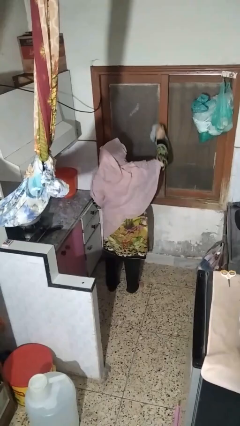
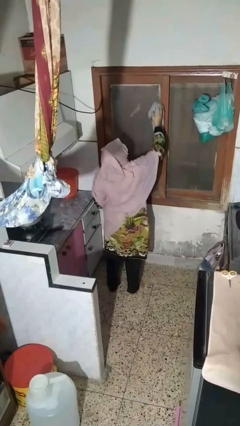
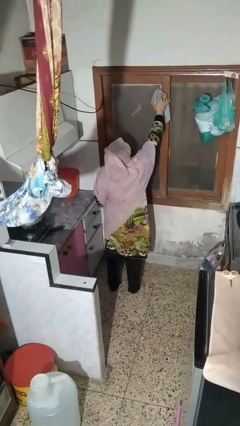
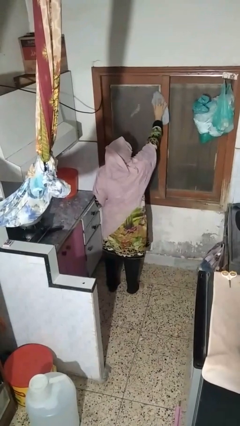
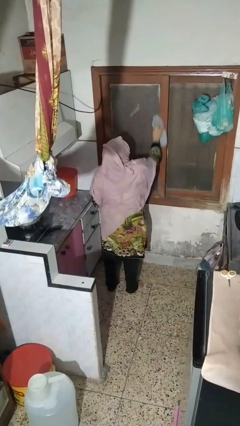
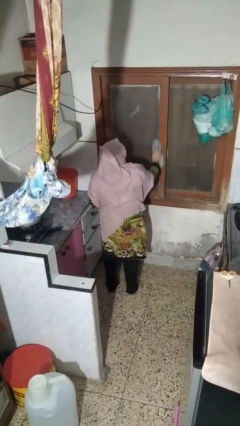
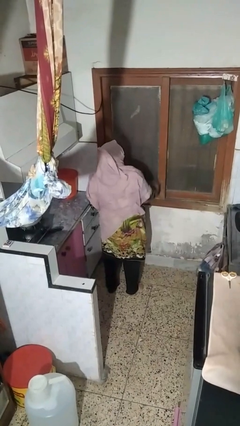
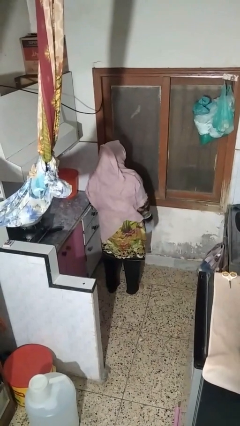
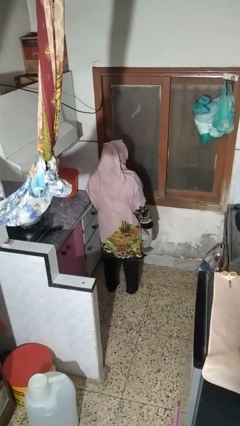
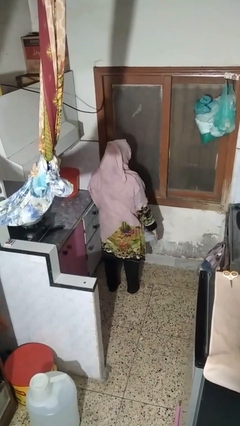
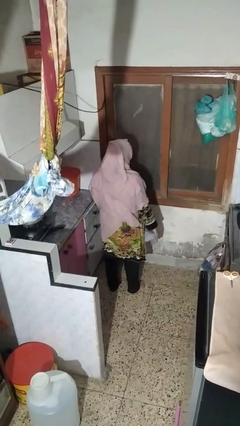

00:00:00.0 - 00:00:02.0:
person washes window

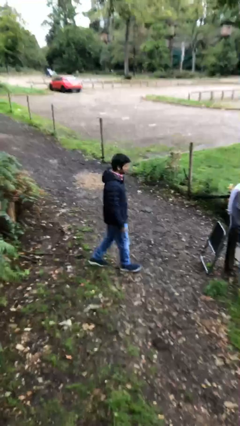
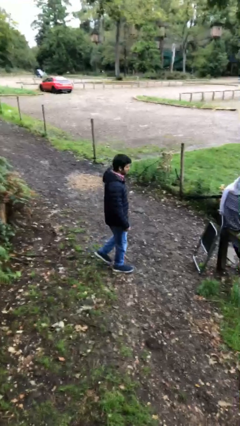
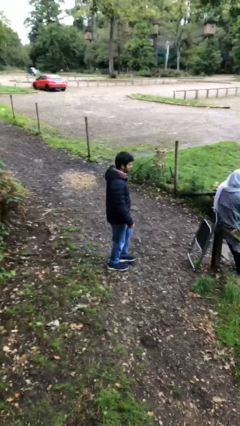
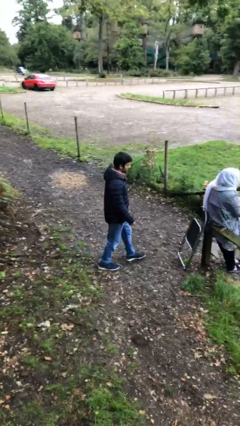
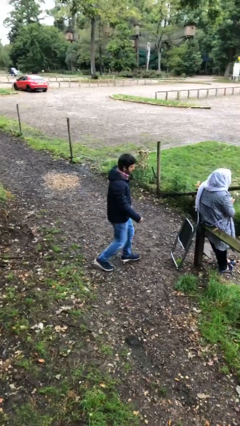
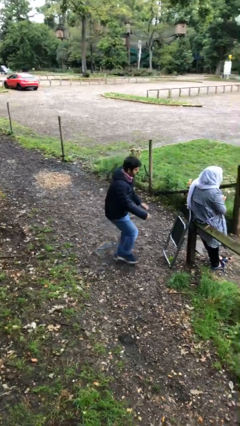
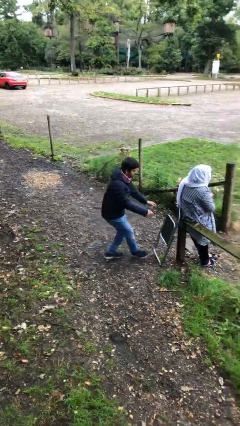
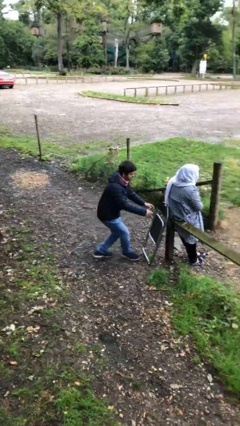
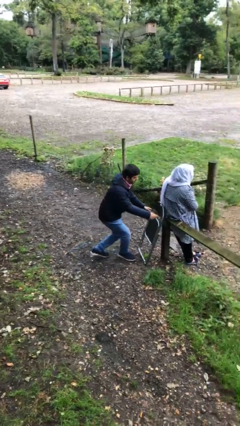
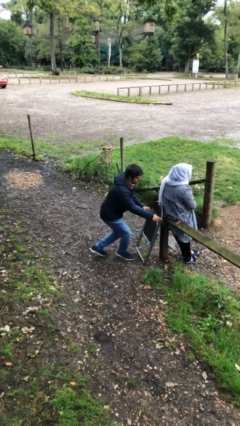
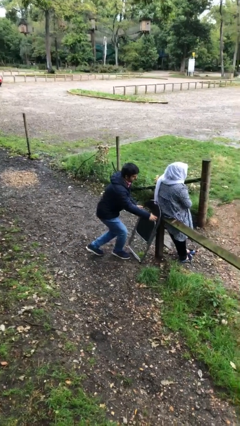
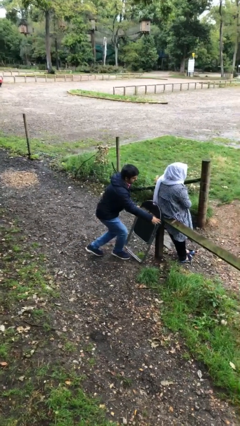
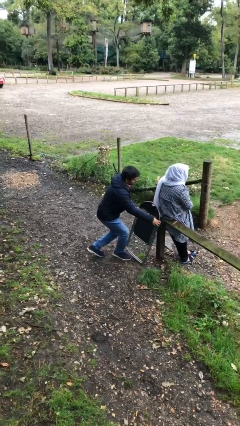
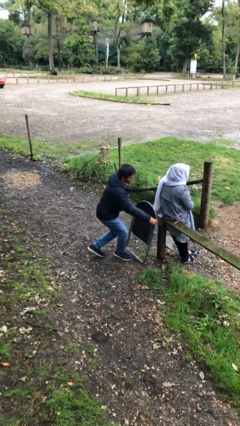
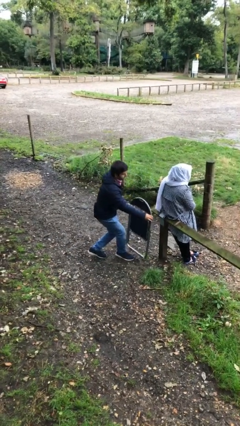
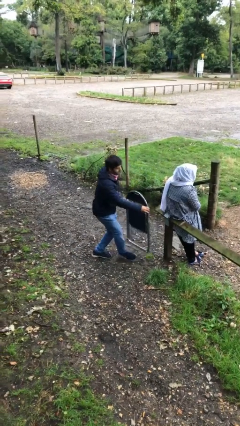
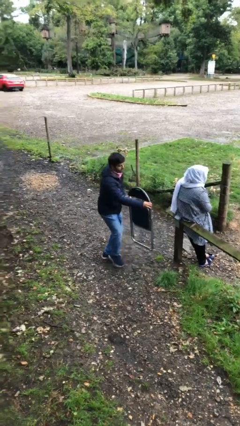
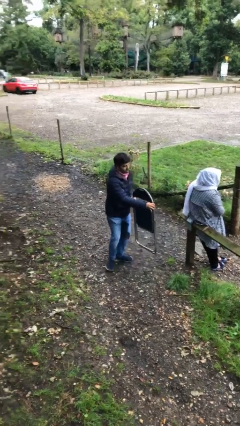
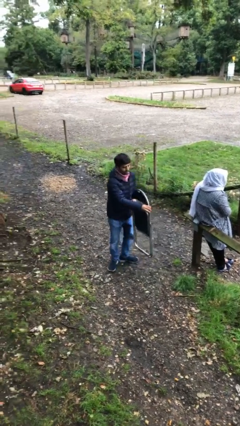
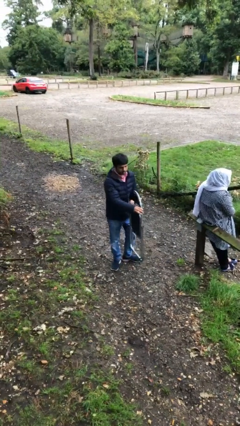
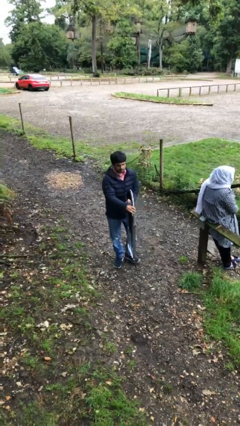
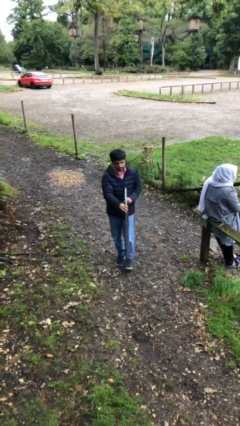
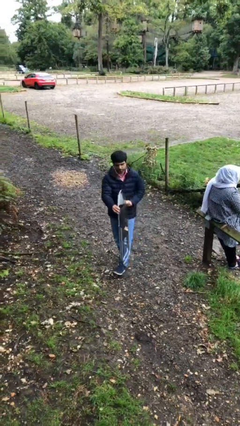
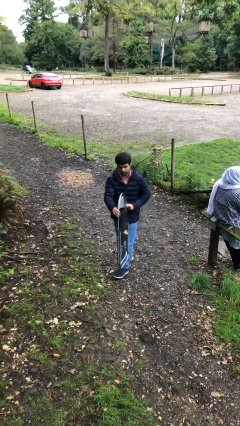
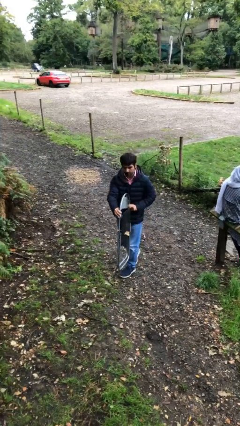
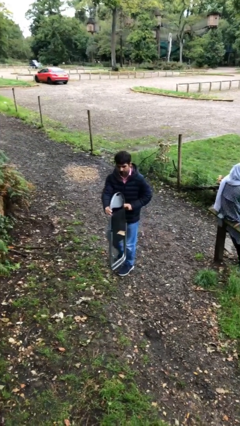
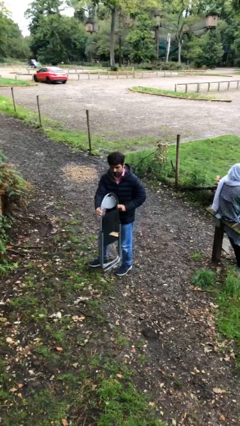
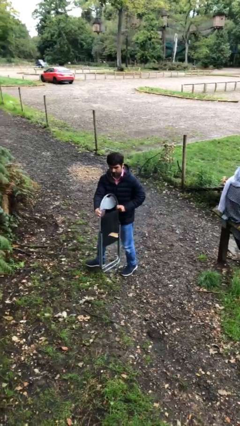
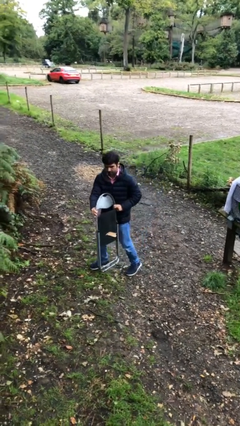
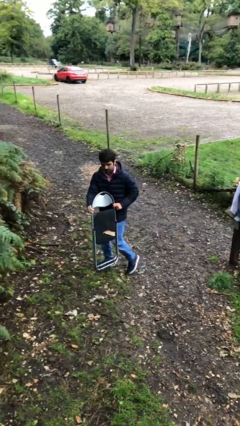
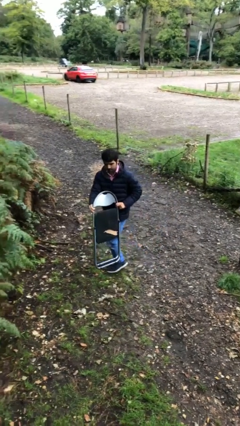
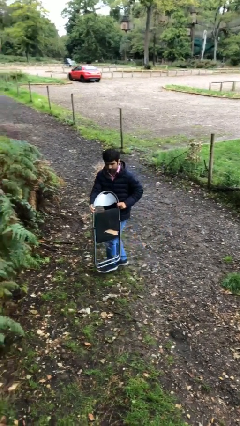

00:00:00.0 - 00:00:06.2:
person steals object from person

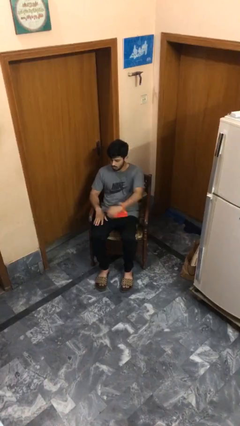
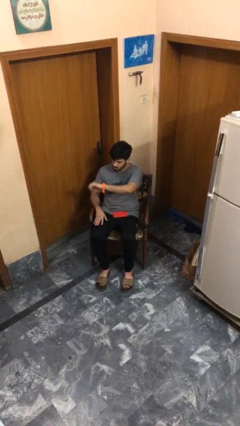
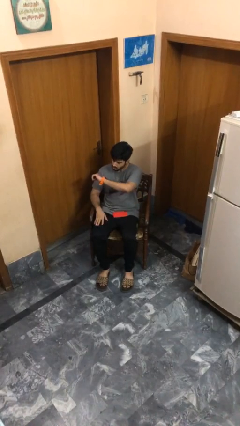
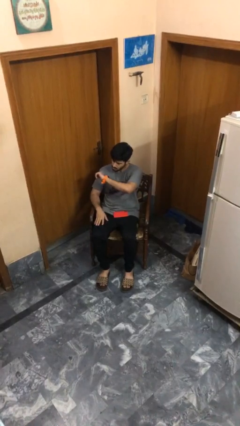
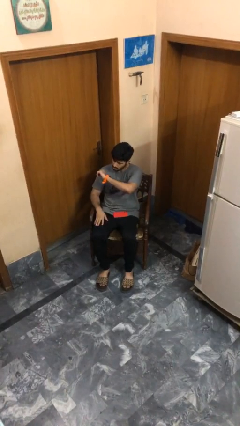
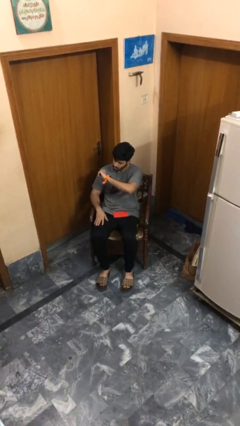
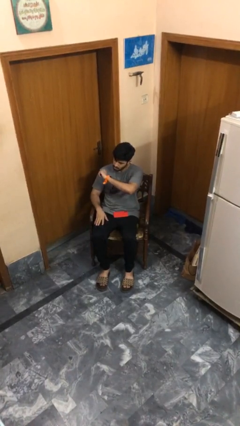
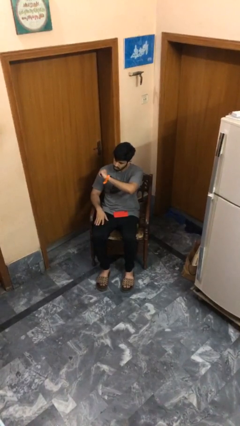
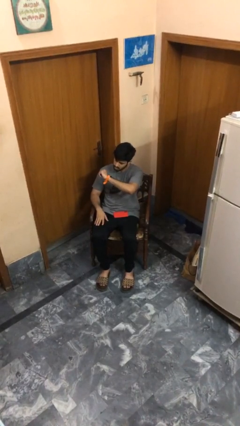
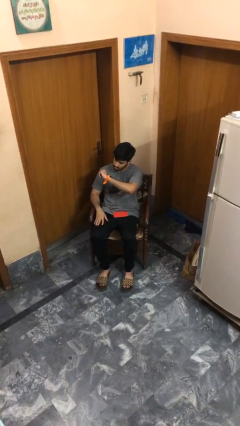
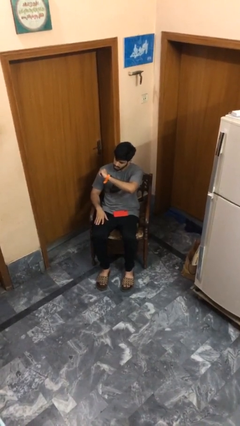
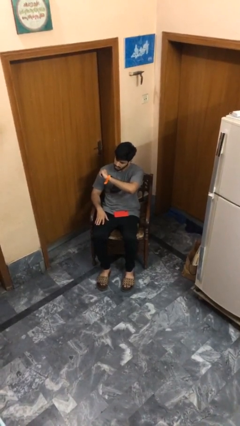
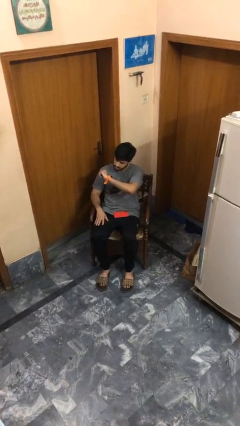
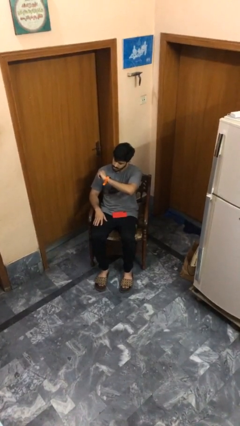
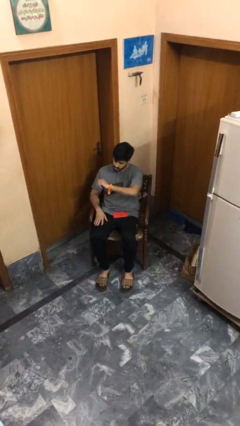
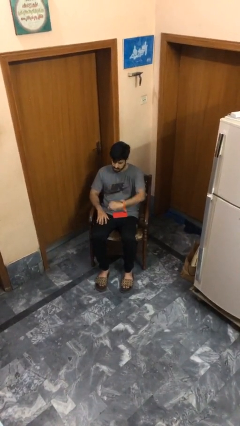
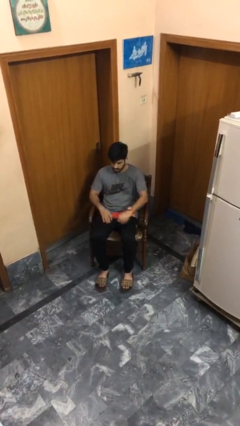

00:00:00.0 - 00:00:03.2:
person looks at wristwatch

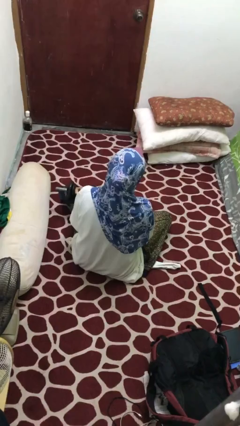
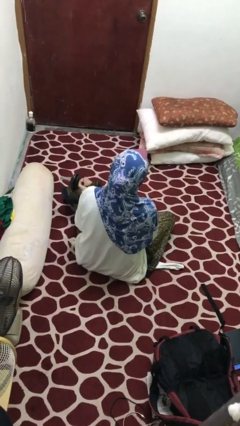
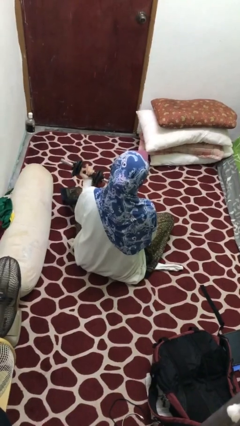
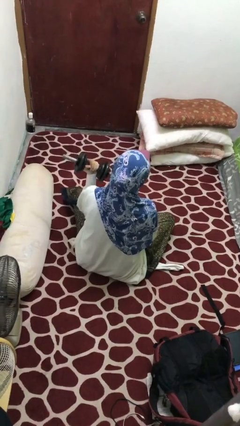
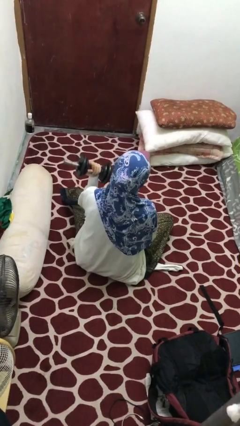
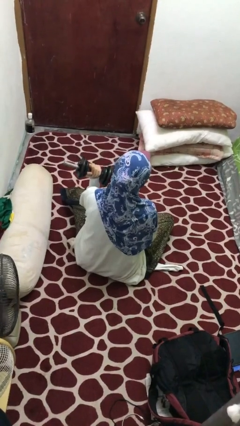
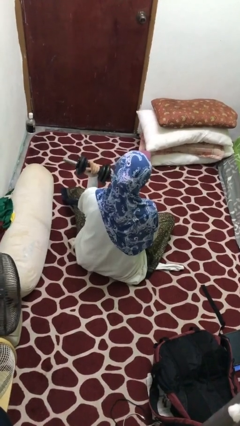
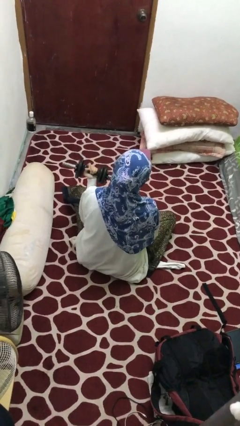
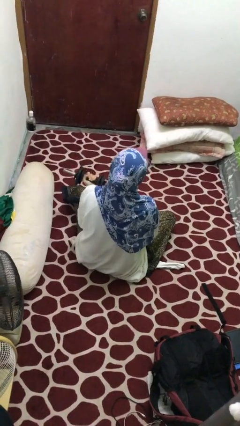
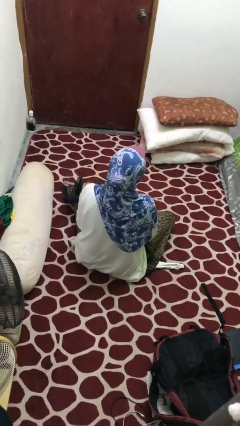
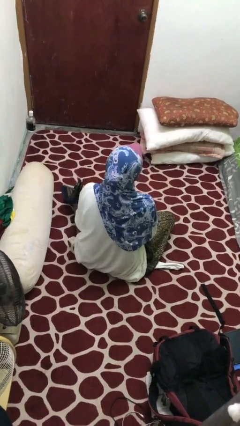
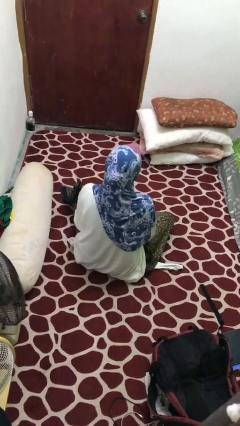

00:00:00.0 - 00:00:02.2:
person lifts dumbbells

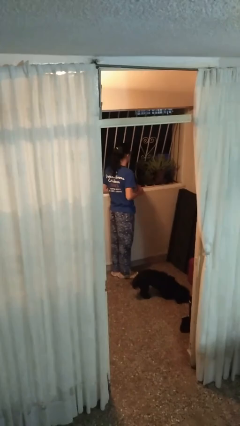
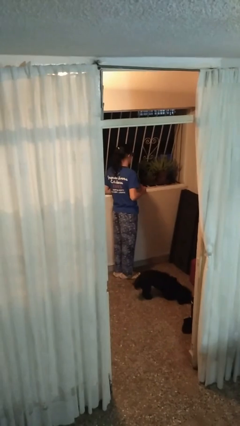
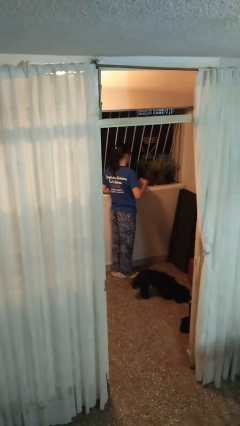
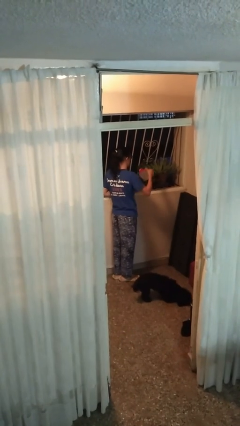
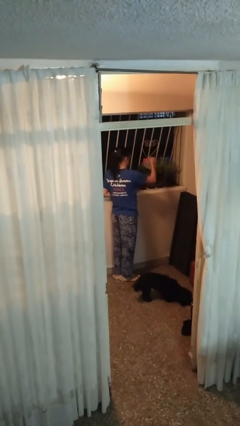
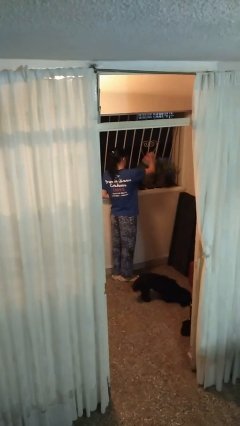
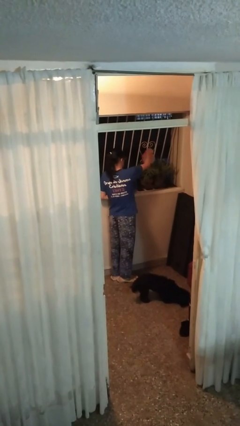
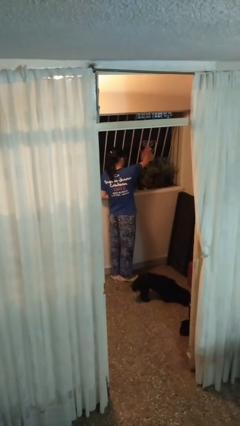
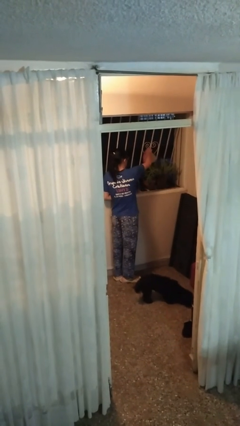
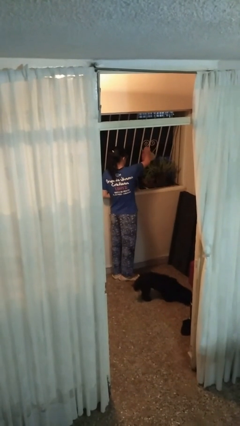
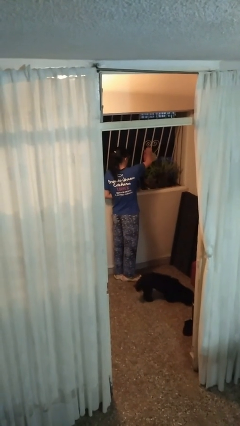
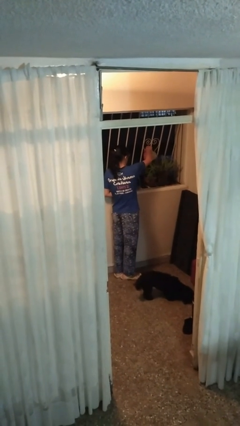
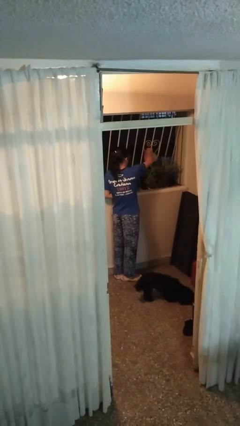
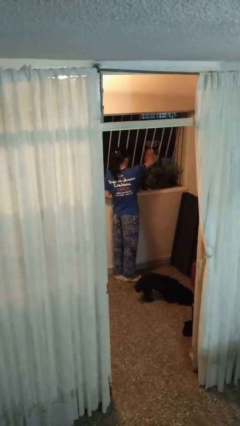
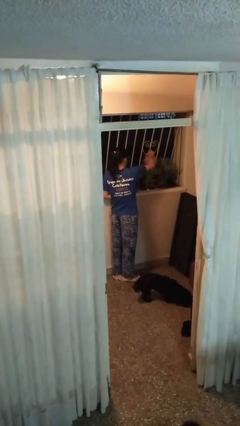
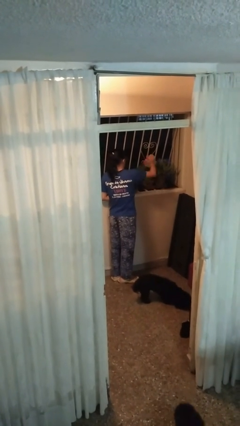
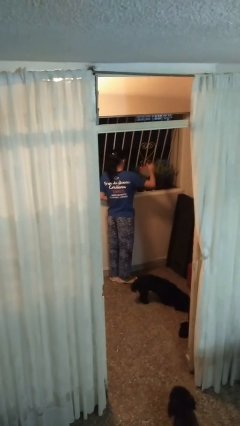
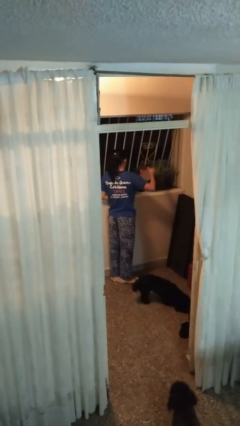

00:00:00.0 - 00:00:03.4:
person waters houseplant

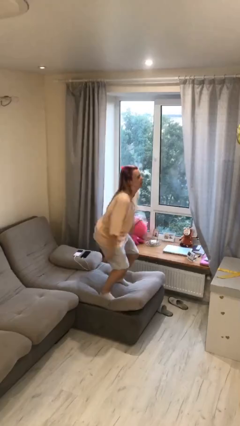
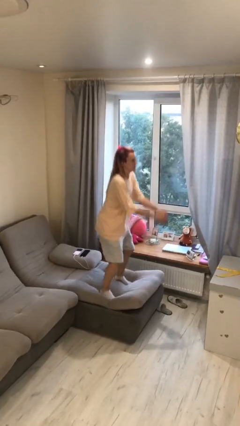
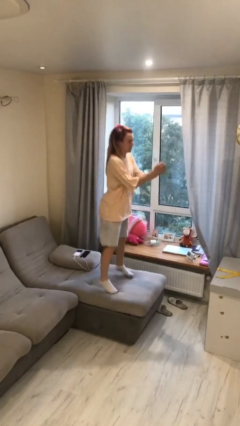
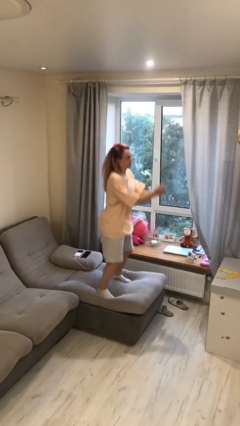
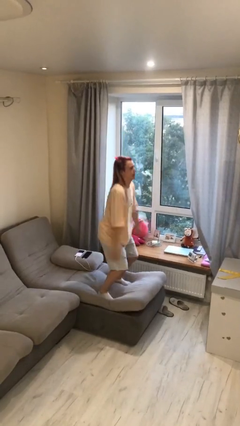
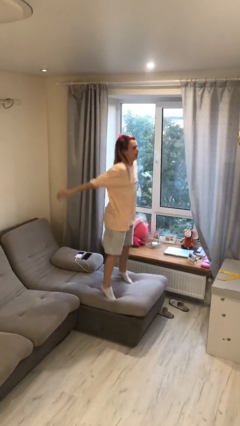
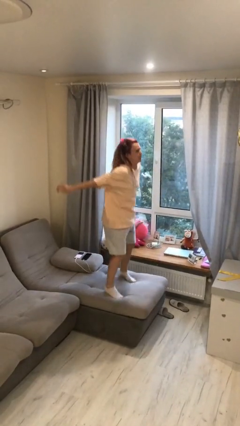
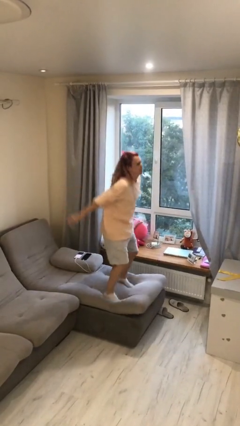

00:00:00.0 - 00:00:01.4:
person jumps on couch
